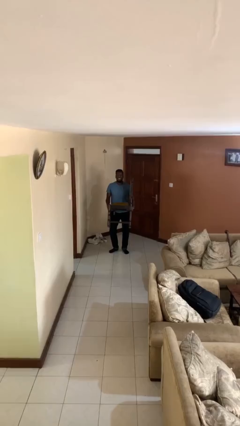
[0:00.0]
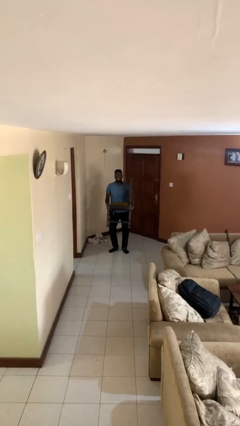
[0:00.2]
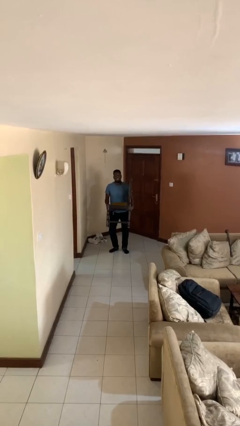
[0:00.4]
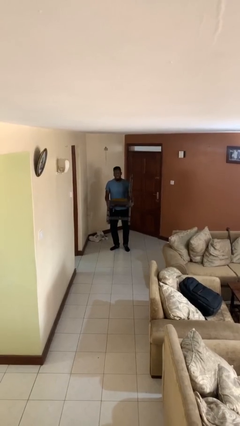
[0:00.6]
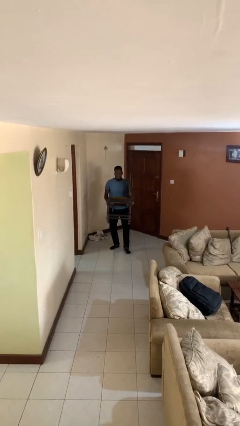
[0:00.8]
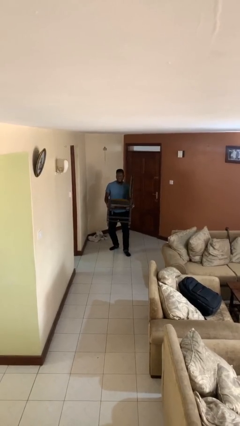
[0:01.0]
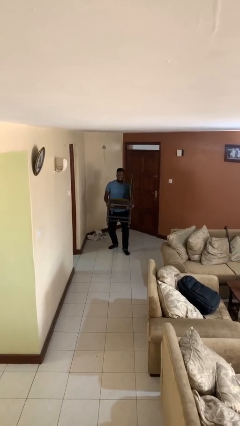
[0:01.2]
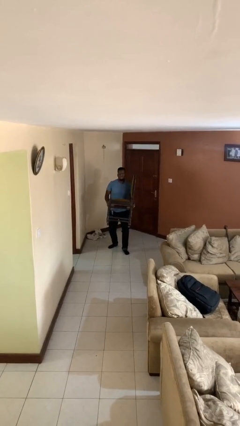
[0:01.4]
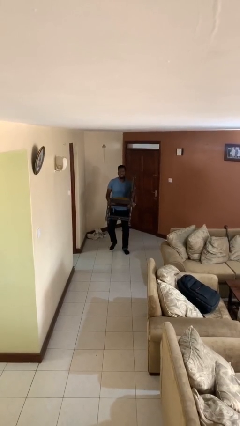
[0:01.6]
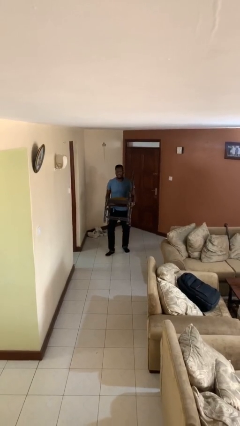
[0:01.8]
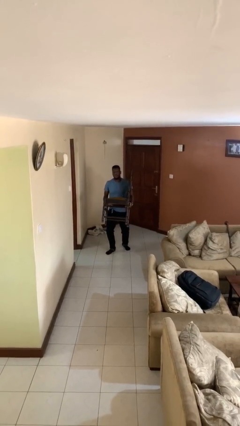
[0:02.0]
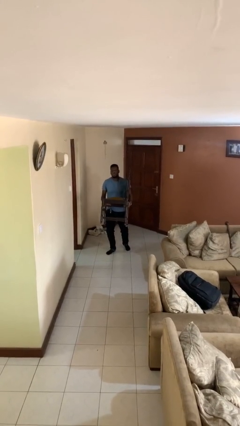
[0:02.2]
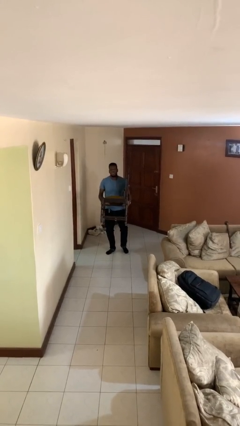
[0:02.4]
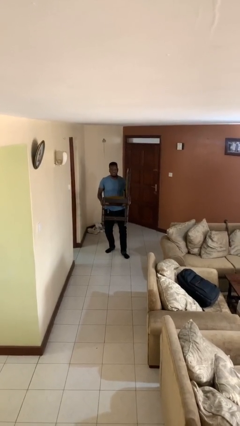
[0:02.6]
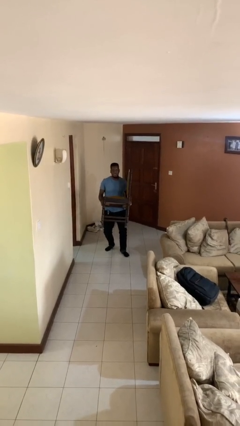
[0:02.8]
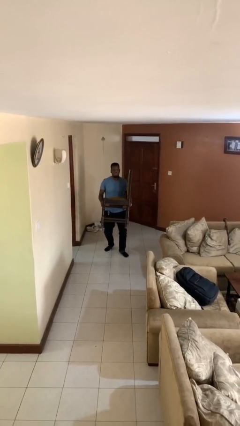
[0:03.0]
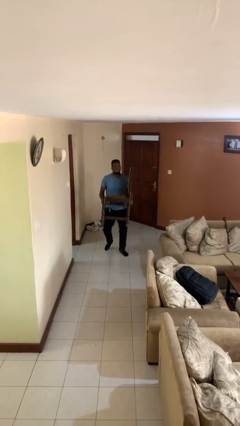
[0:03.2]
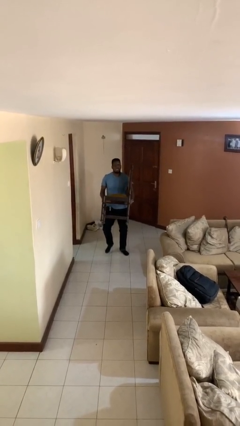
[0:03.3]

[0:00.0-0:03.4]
person carries heavy object

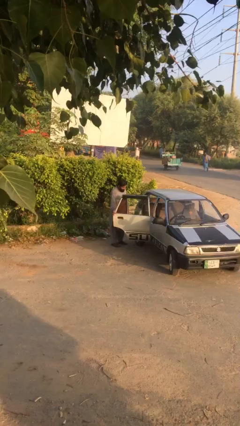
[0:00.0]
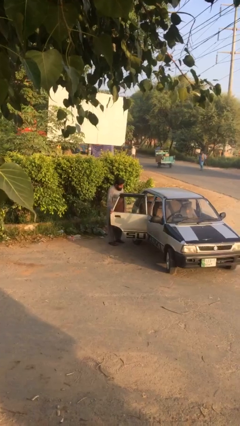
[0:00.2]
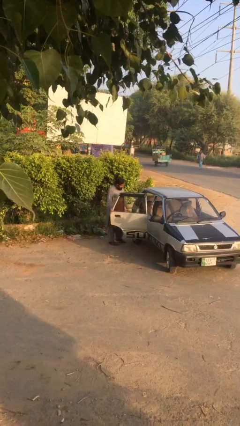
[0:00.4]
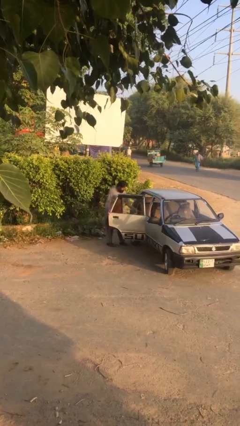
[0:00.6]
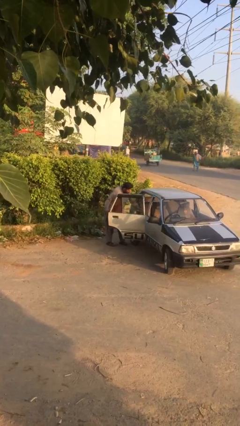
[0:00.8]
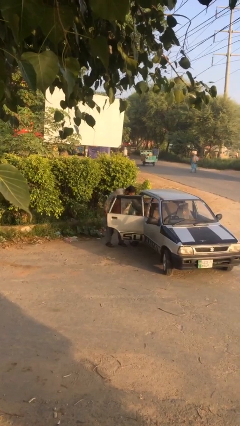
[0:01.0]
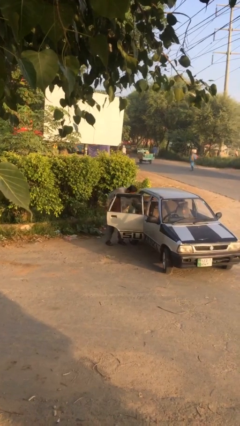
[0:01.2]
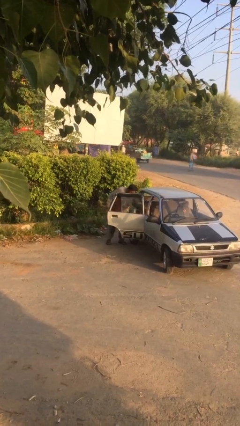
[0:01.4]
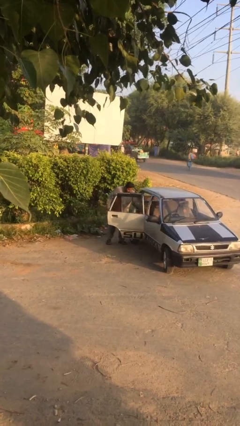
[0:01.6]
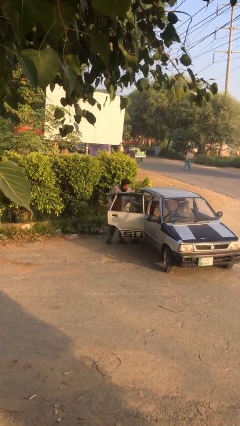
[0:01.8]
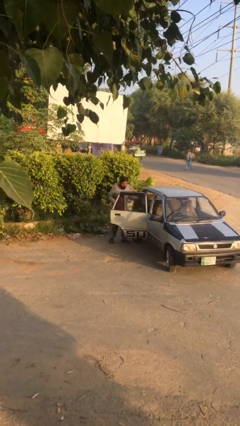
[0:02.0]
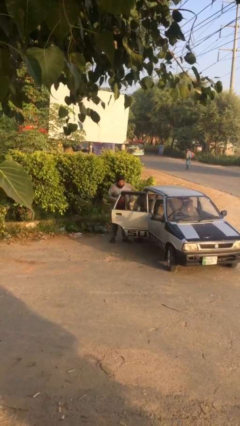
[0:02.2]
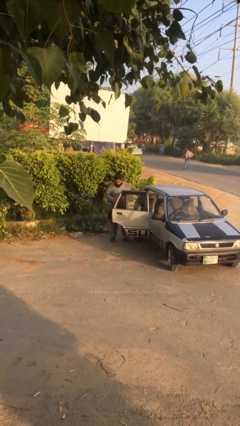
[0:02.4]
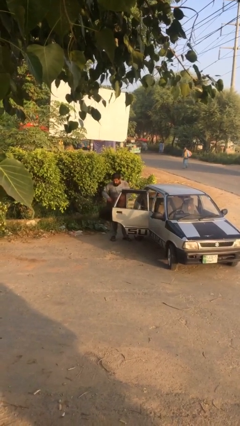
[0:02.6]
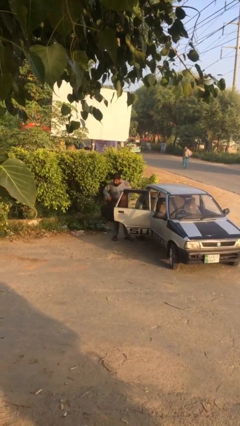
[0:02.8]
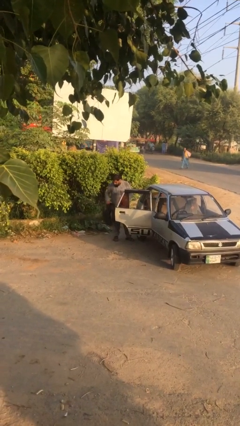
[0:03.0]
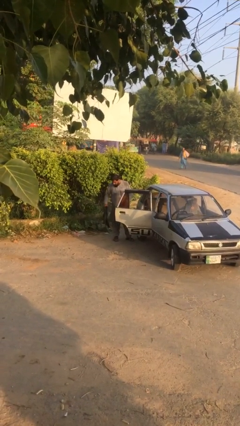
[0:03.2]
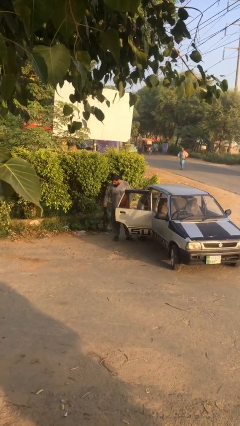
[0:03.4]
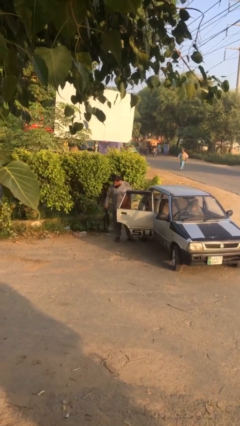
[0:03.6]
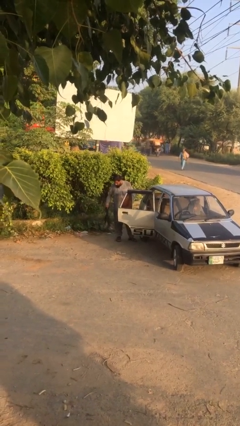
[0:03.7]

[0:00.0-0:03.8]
person unloads car

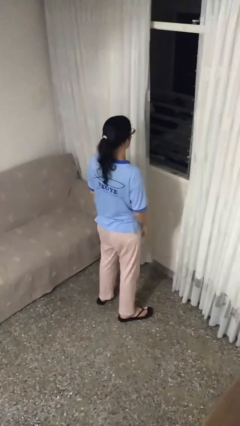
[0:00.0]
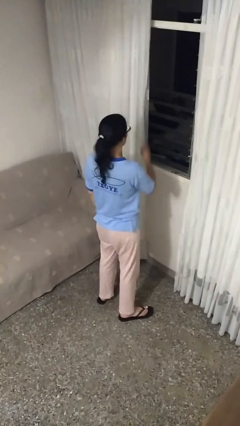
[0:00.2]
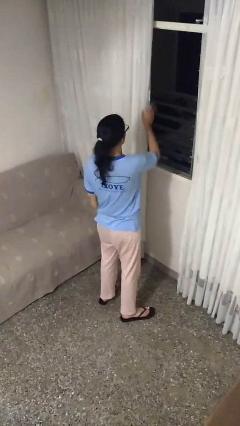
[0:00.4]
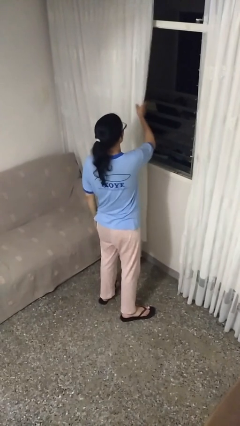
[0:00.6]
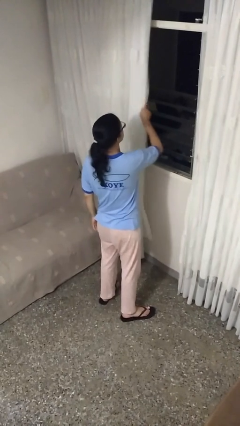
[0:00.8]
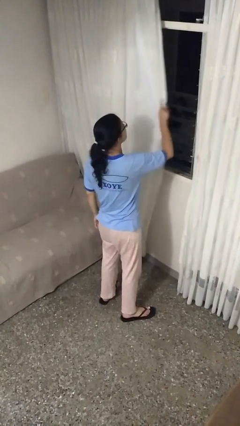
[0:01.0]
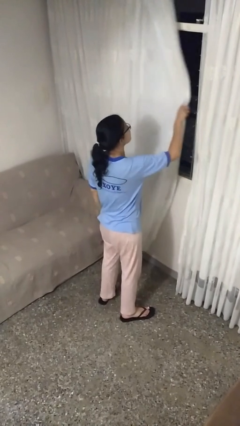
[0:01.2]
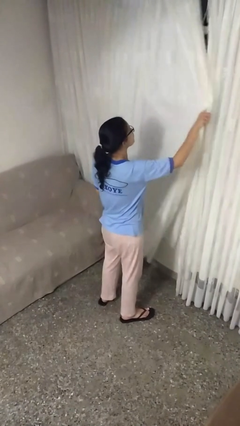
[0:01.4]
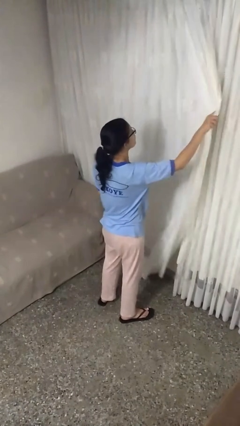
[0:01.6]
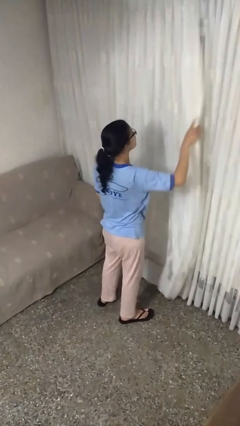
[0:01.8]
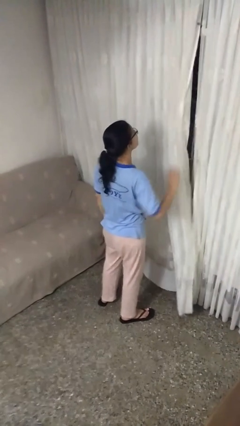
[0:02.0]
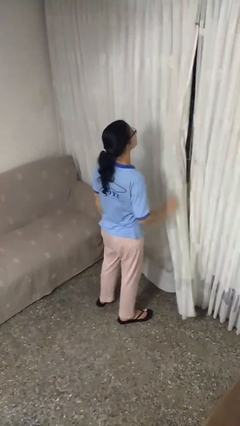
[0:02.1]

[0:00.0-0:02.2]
person closes curtains

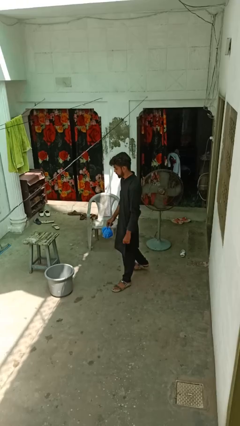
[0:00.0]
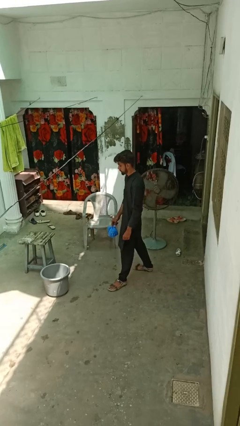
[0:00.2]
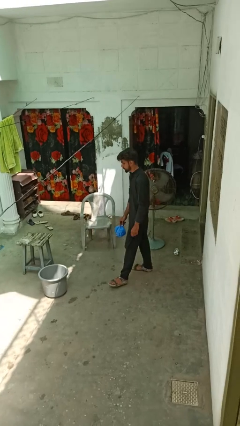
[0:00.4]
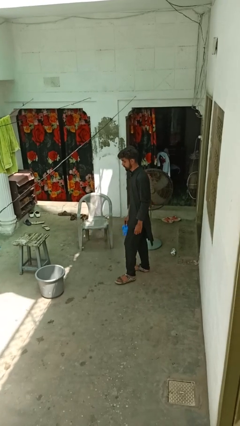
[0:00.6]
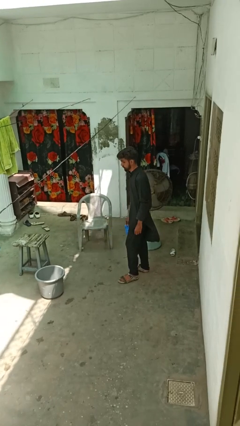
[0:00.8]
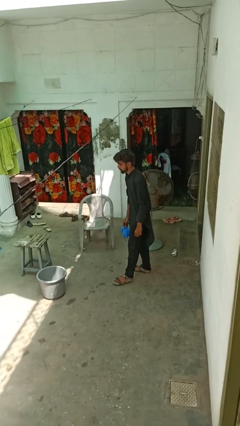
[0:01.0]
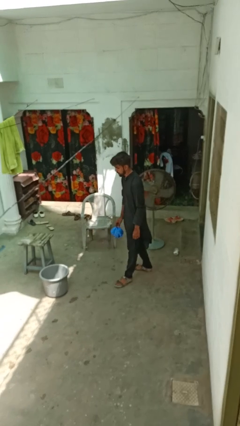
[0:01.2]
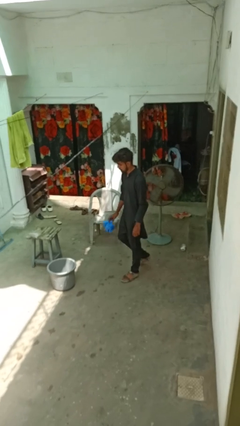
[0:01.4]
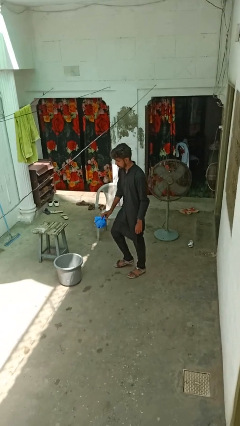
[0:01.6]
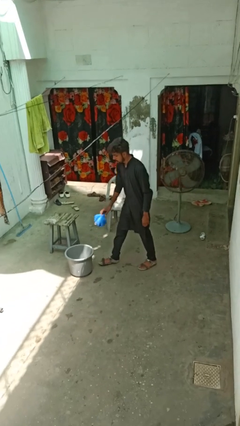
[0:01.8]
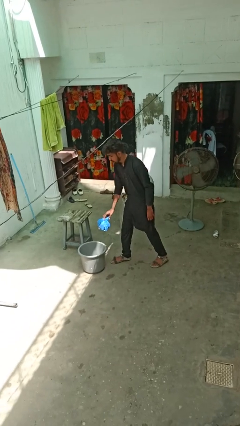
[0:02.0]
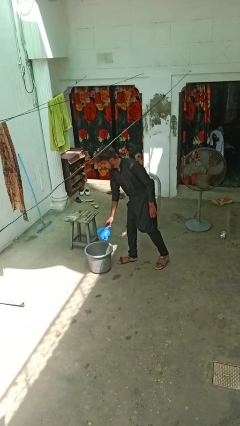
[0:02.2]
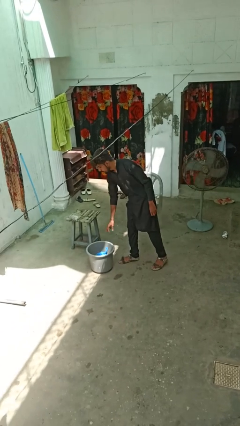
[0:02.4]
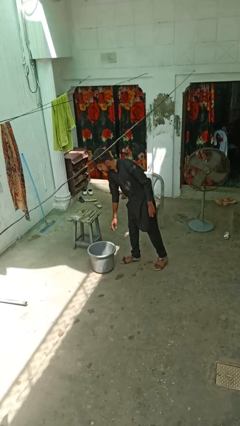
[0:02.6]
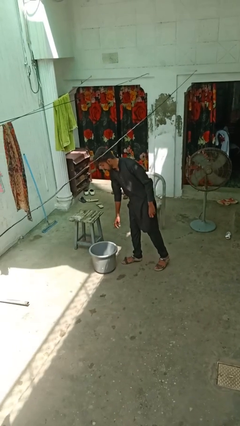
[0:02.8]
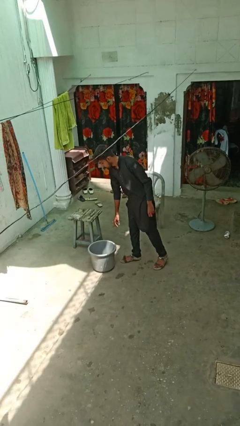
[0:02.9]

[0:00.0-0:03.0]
person discards trash

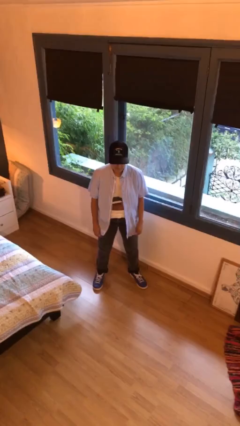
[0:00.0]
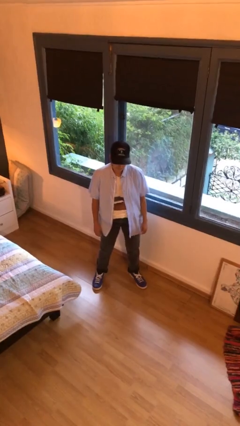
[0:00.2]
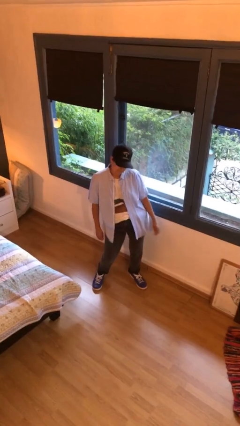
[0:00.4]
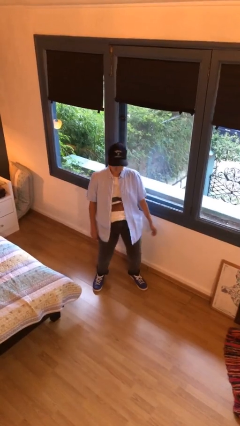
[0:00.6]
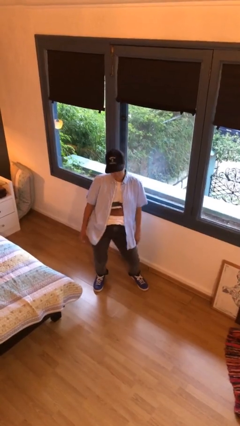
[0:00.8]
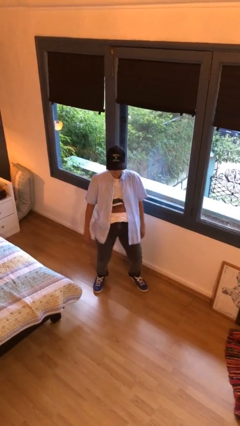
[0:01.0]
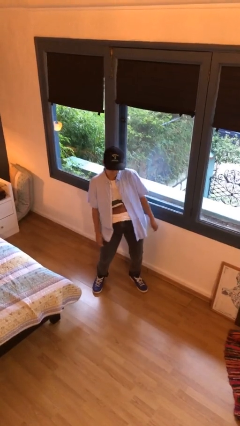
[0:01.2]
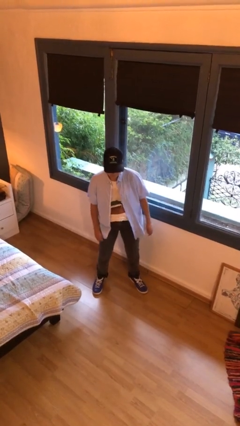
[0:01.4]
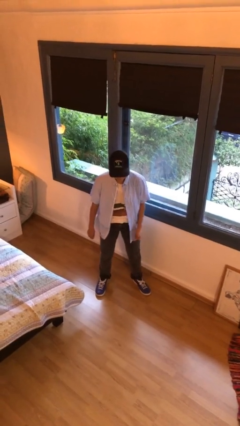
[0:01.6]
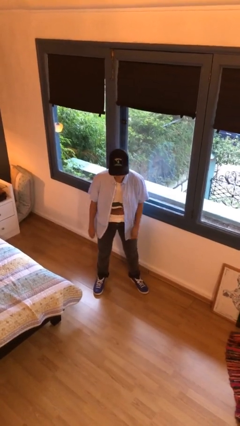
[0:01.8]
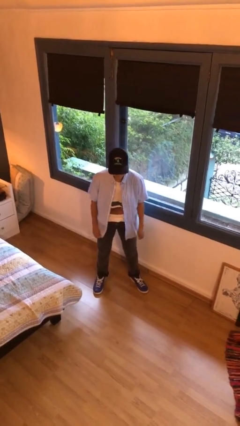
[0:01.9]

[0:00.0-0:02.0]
person wiggles hips

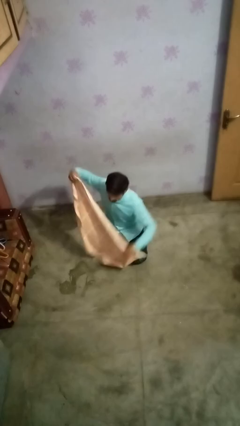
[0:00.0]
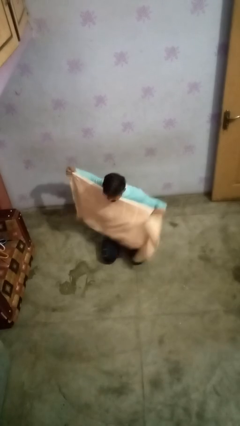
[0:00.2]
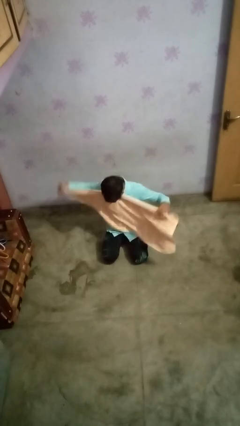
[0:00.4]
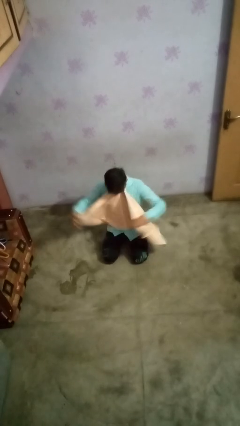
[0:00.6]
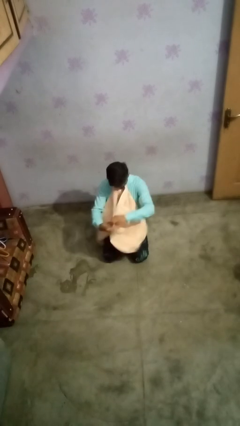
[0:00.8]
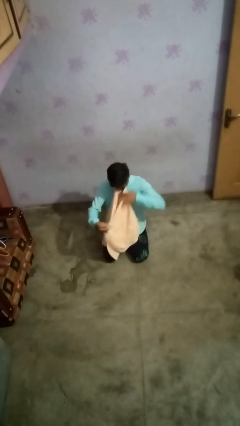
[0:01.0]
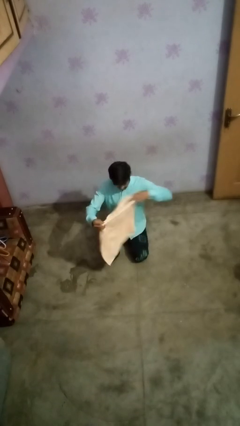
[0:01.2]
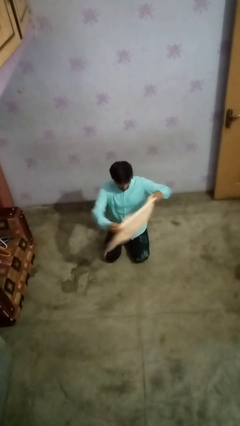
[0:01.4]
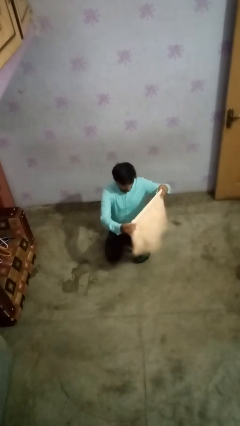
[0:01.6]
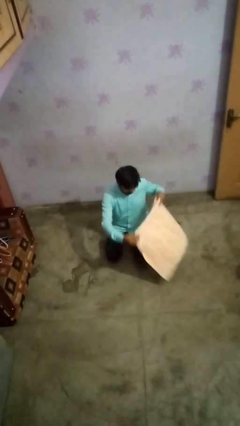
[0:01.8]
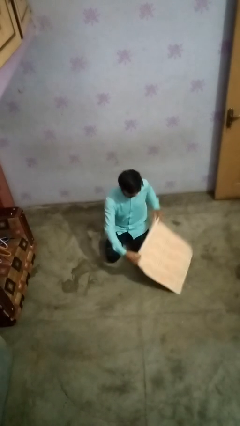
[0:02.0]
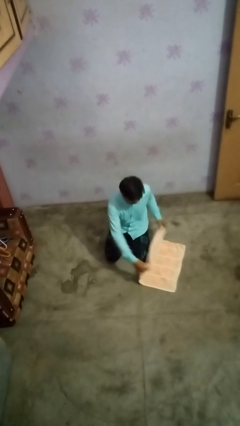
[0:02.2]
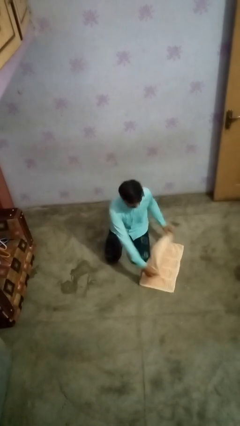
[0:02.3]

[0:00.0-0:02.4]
person folds towel

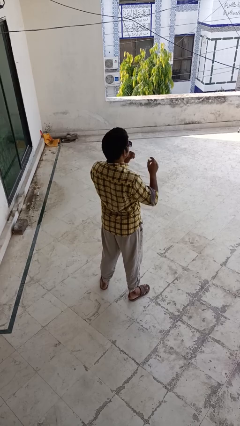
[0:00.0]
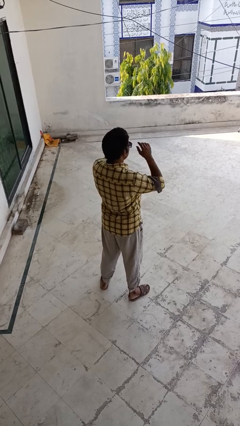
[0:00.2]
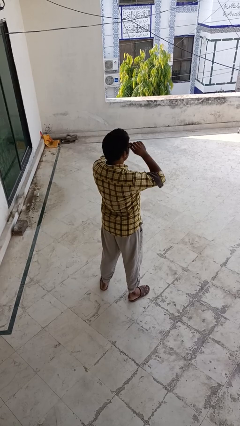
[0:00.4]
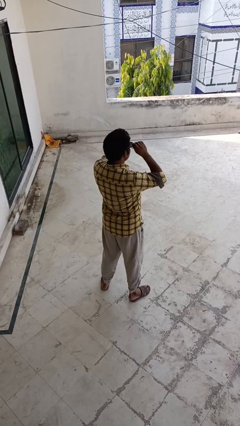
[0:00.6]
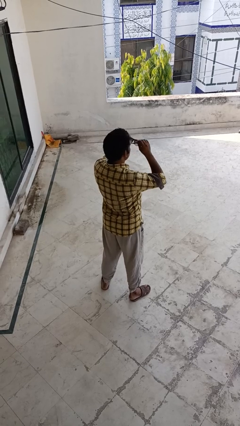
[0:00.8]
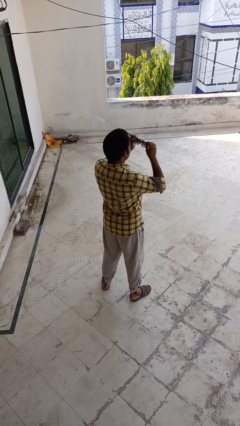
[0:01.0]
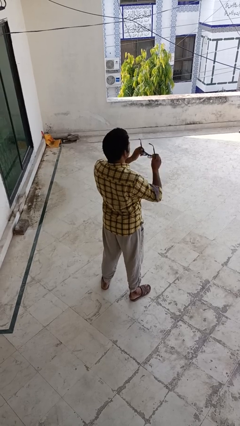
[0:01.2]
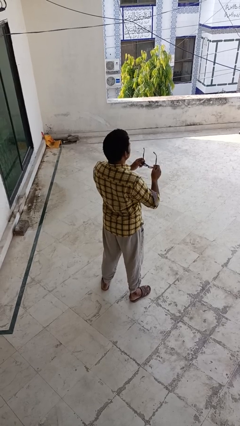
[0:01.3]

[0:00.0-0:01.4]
person takes off sunglasses
